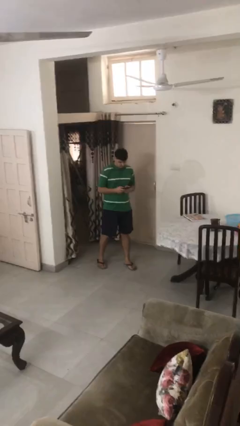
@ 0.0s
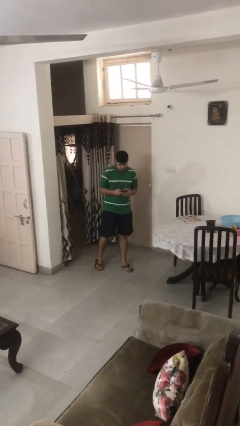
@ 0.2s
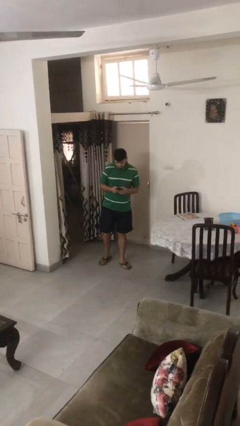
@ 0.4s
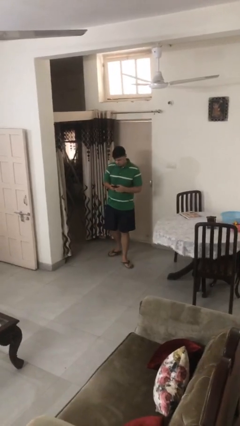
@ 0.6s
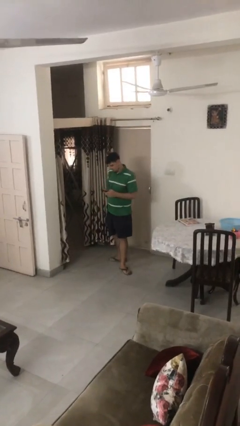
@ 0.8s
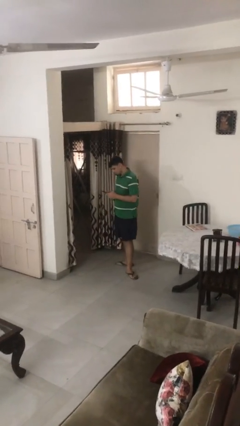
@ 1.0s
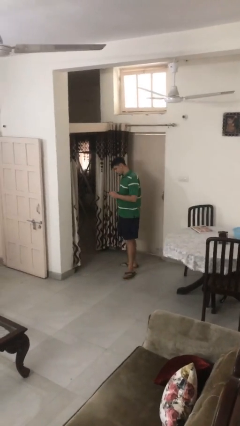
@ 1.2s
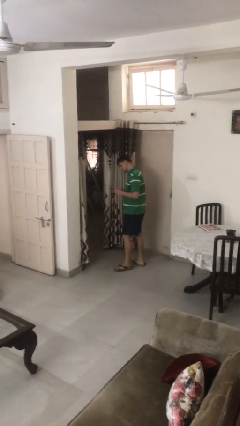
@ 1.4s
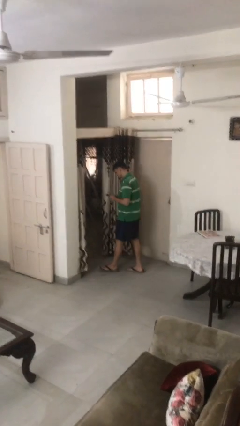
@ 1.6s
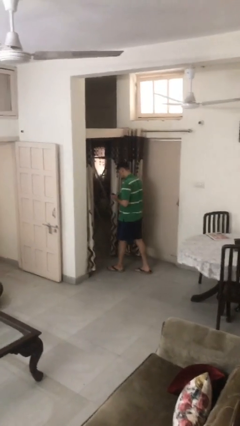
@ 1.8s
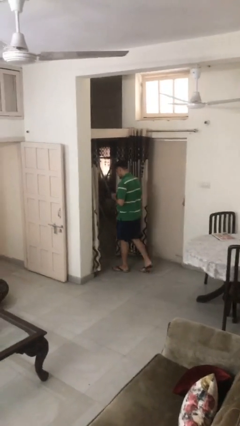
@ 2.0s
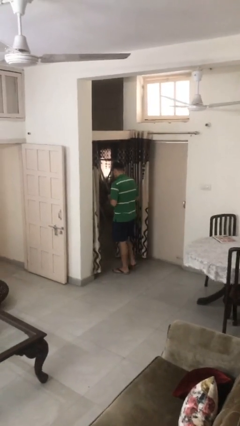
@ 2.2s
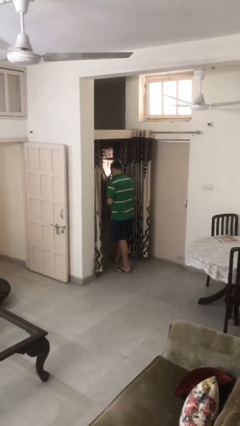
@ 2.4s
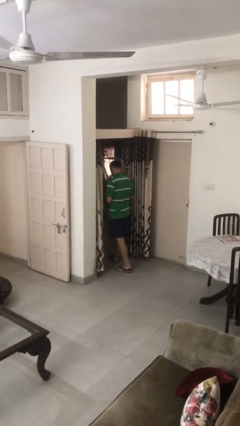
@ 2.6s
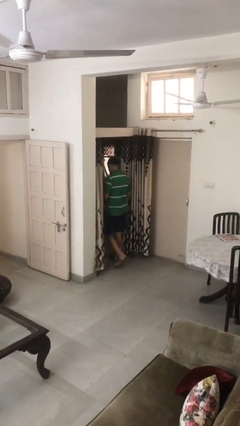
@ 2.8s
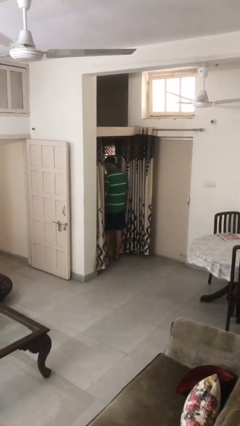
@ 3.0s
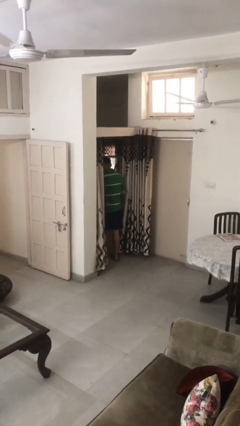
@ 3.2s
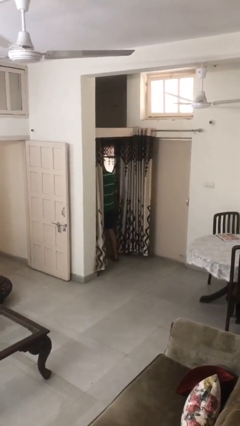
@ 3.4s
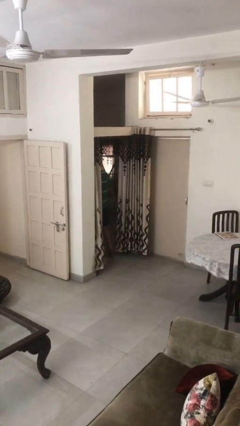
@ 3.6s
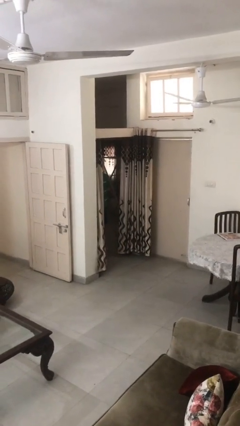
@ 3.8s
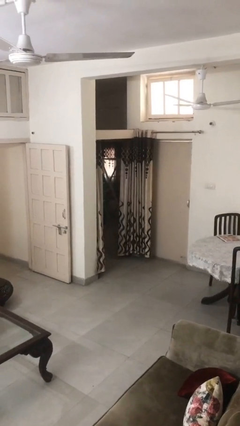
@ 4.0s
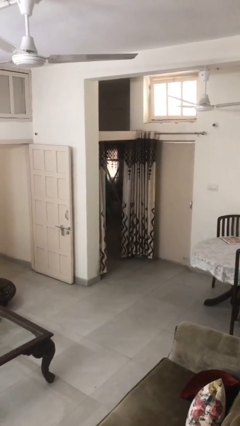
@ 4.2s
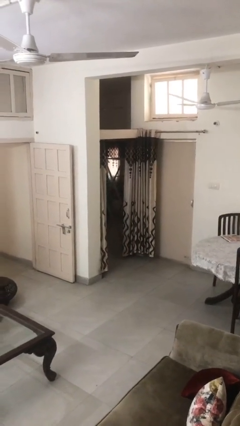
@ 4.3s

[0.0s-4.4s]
person exits scene through structure

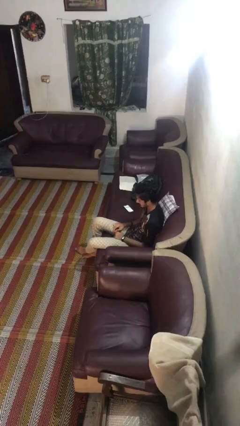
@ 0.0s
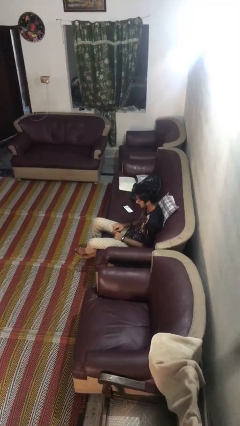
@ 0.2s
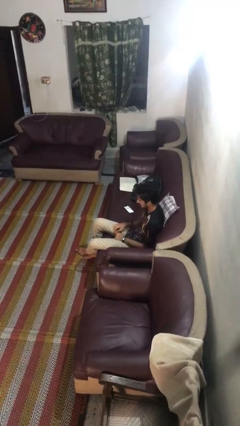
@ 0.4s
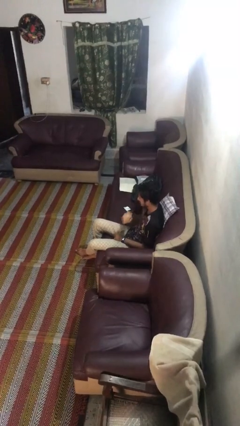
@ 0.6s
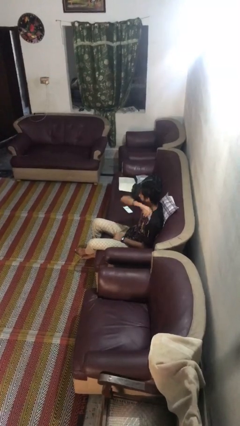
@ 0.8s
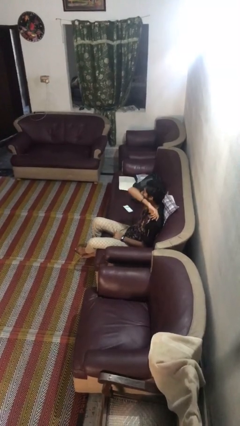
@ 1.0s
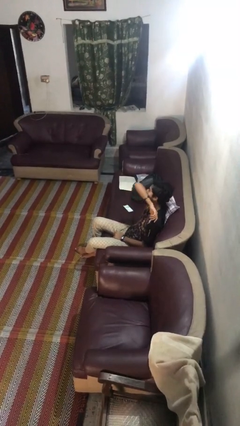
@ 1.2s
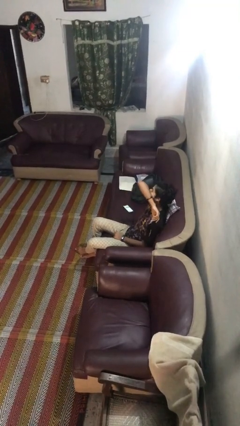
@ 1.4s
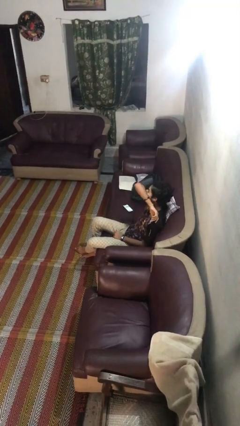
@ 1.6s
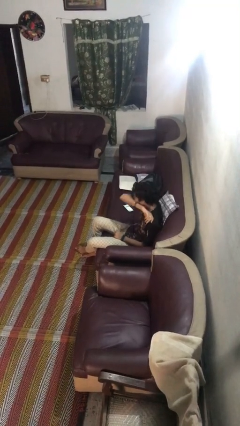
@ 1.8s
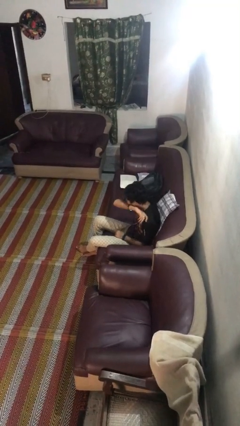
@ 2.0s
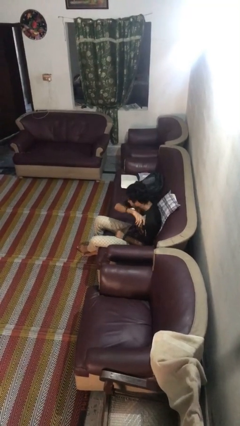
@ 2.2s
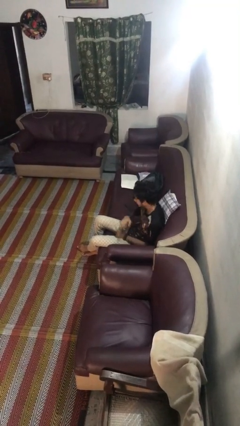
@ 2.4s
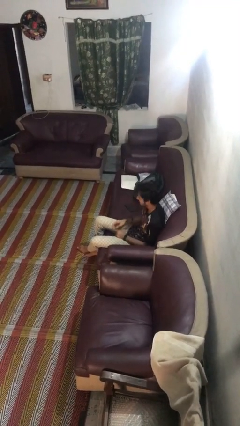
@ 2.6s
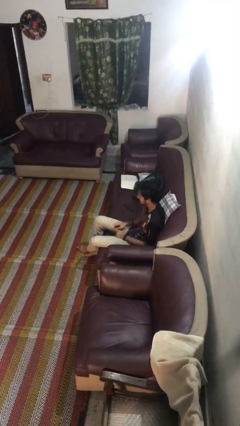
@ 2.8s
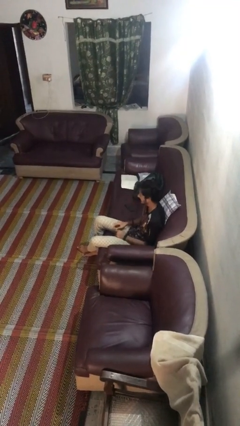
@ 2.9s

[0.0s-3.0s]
person sneezes into arm

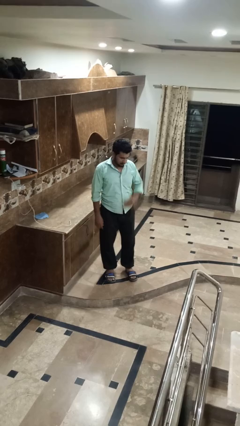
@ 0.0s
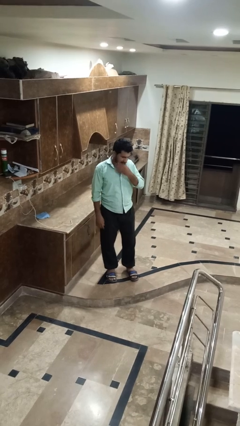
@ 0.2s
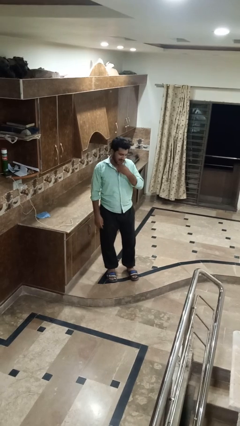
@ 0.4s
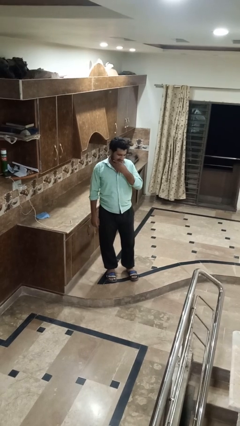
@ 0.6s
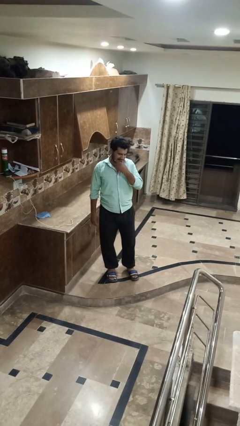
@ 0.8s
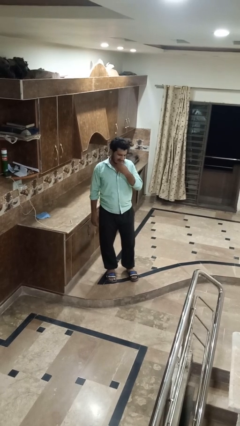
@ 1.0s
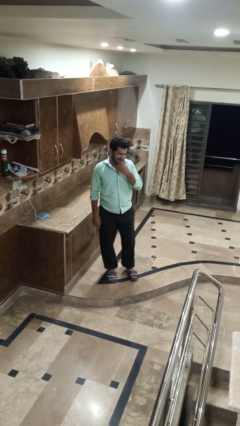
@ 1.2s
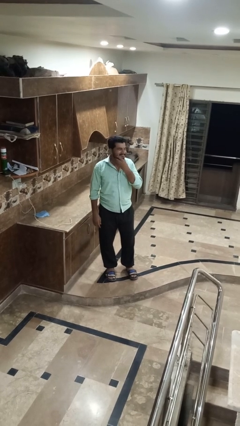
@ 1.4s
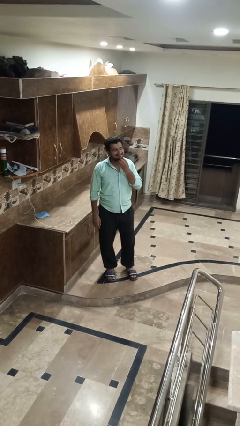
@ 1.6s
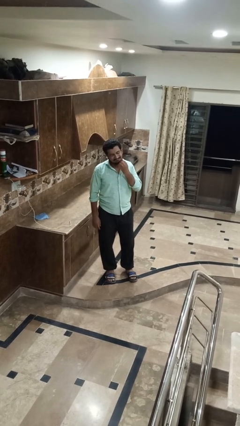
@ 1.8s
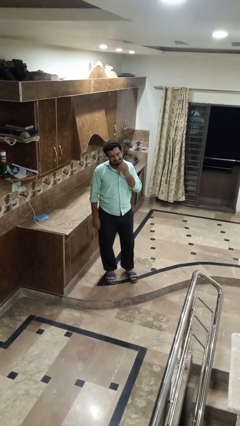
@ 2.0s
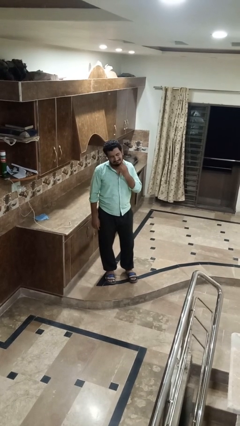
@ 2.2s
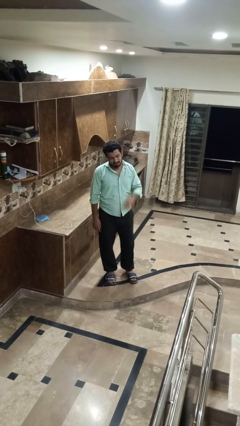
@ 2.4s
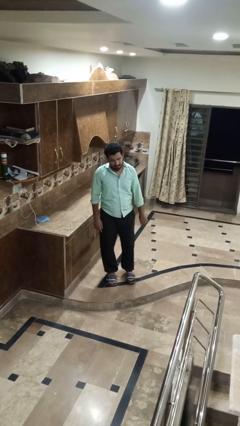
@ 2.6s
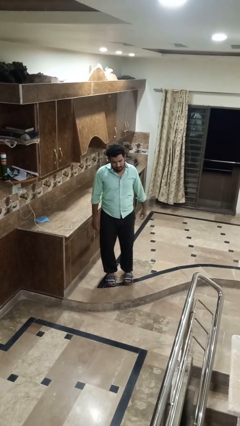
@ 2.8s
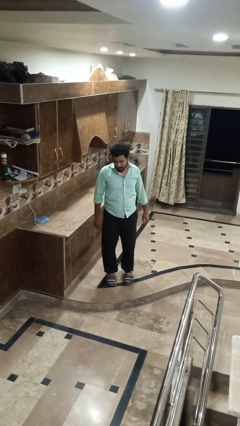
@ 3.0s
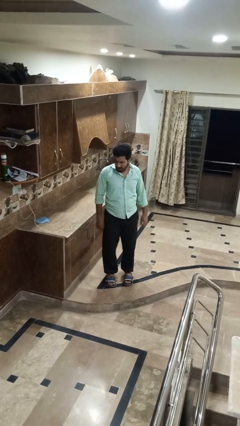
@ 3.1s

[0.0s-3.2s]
person strokes chin

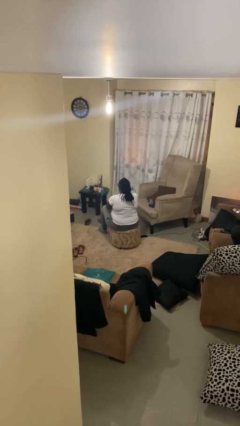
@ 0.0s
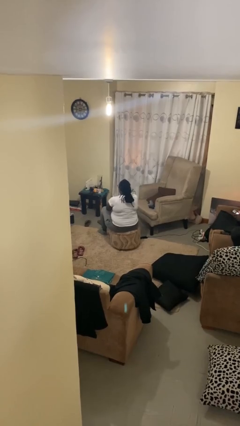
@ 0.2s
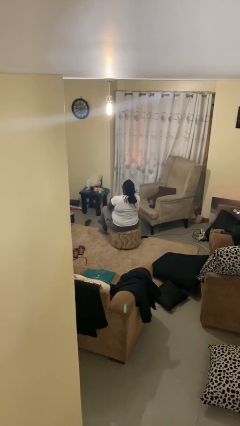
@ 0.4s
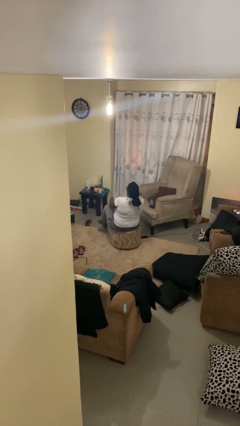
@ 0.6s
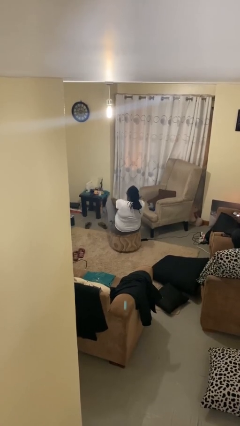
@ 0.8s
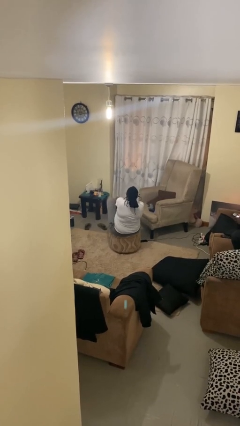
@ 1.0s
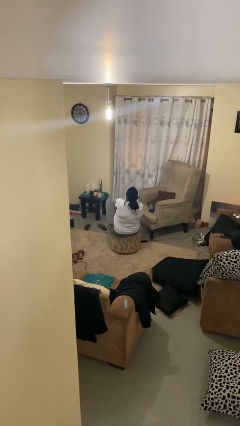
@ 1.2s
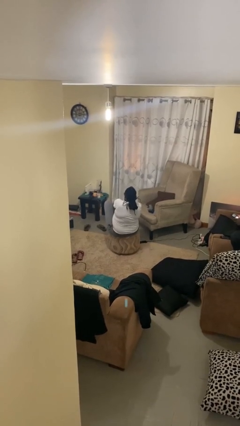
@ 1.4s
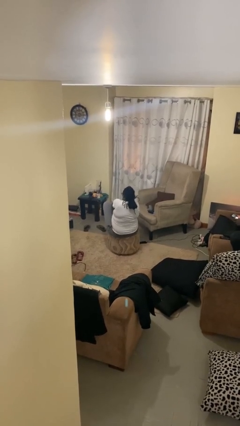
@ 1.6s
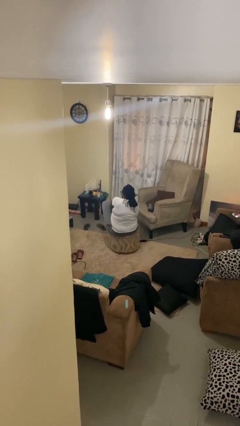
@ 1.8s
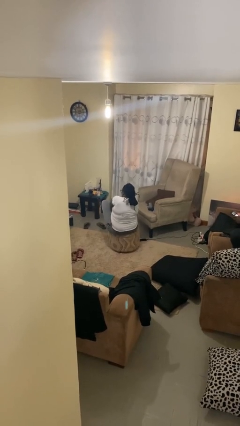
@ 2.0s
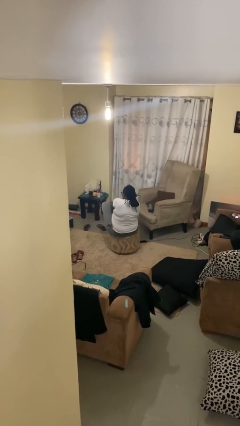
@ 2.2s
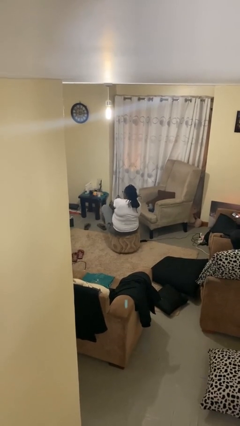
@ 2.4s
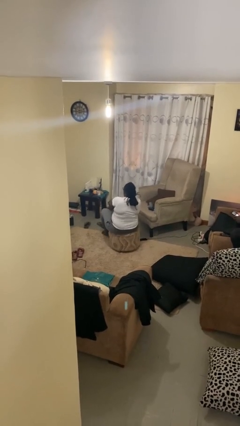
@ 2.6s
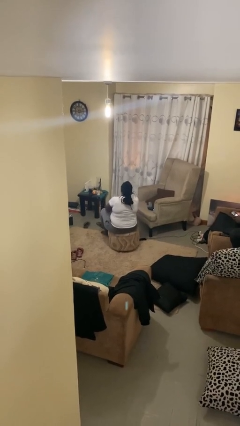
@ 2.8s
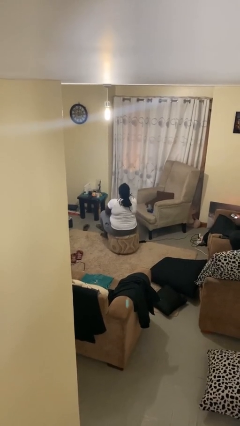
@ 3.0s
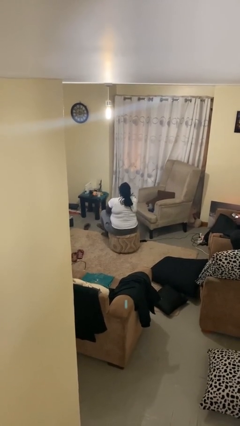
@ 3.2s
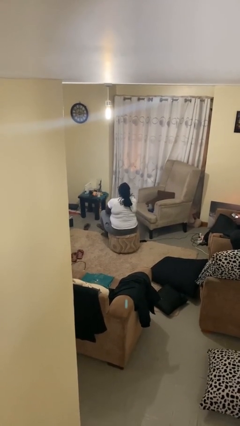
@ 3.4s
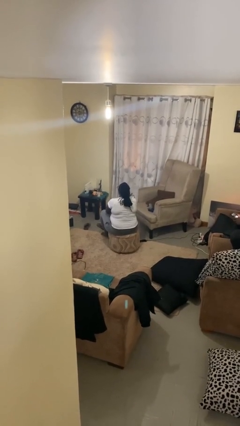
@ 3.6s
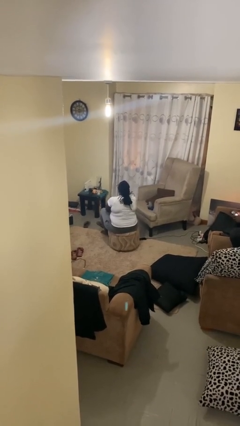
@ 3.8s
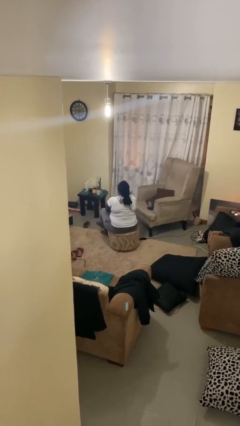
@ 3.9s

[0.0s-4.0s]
person takes off socks

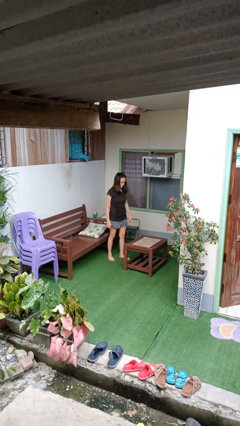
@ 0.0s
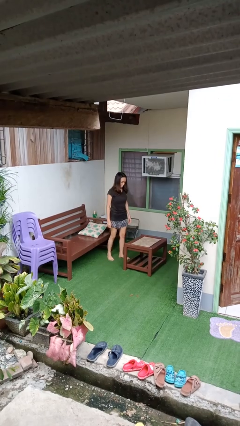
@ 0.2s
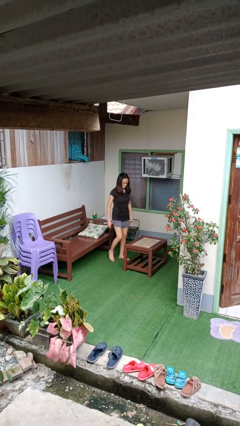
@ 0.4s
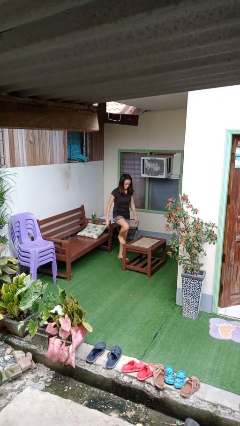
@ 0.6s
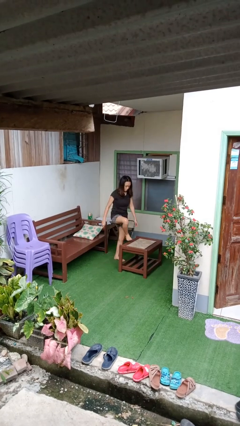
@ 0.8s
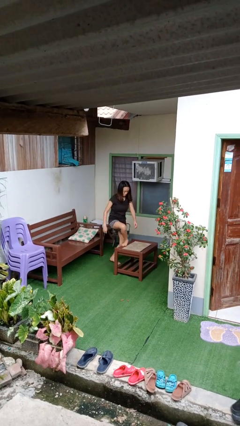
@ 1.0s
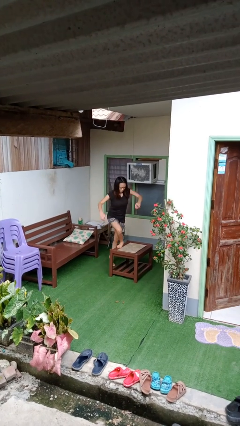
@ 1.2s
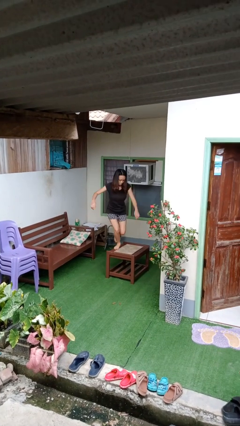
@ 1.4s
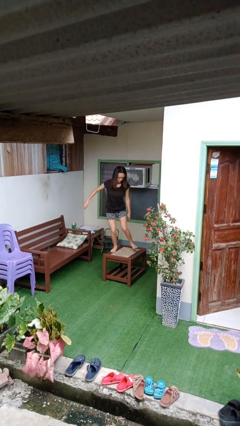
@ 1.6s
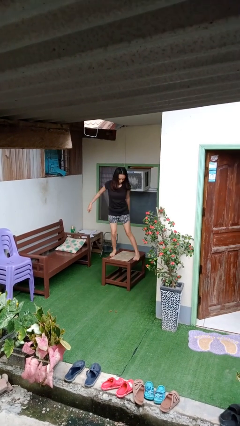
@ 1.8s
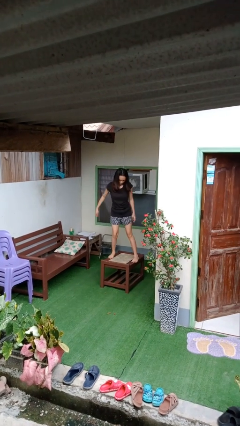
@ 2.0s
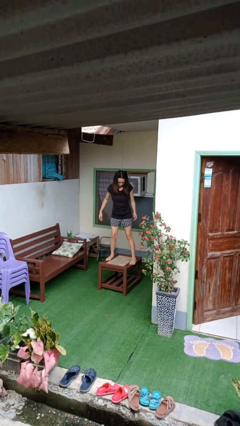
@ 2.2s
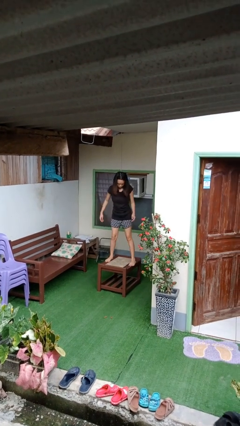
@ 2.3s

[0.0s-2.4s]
person climbs on table

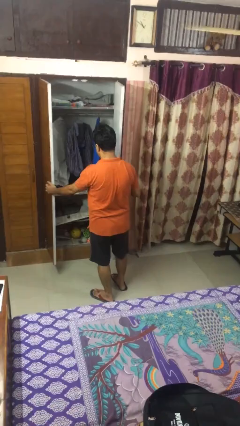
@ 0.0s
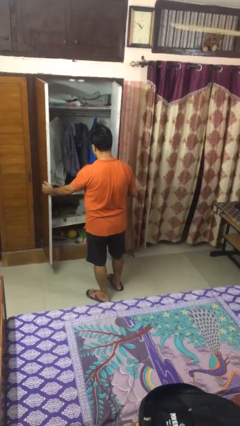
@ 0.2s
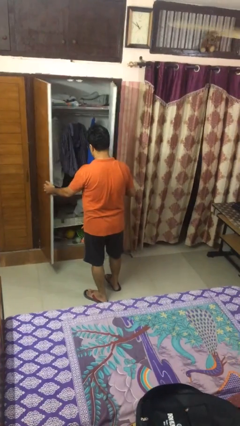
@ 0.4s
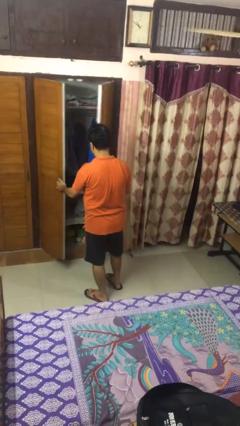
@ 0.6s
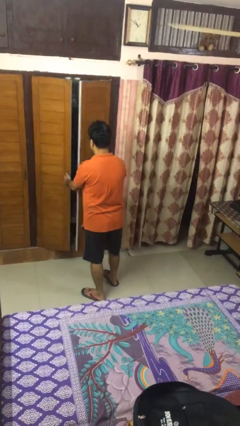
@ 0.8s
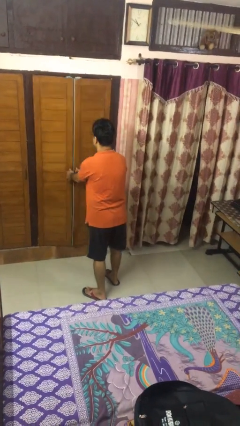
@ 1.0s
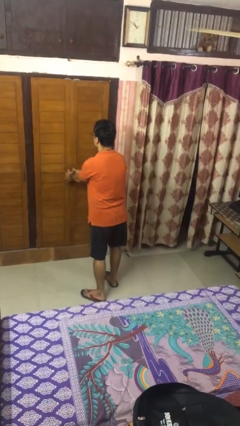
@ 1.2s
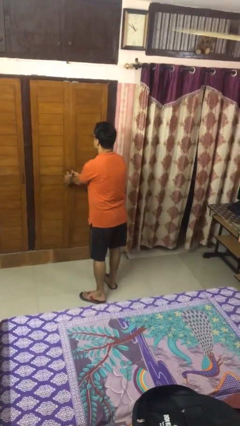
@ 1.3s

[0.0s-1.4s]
person closes closet door
